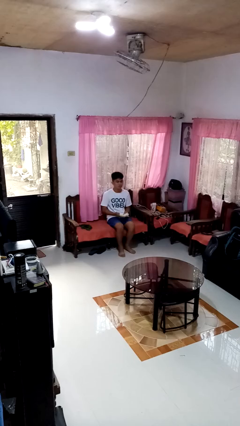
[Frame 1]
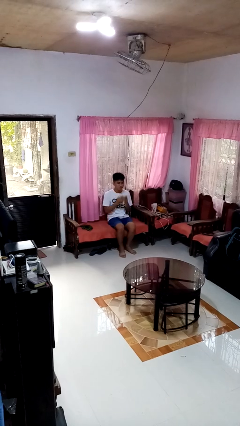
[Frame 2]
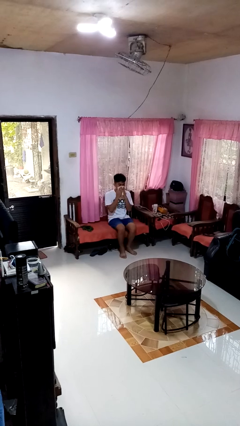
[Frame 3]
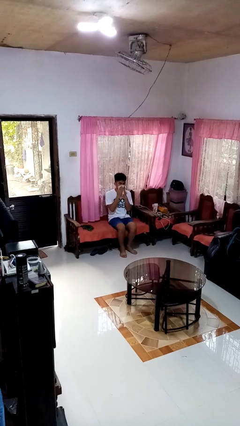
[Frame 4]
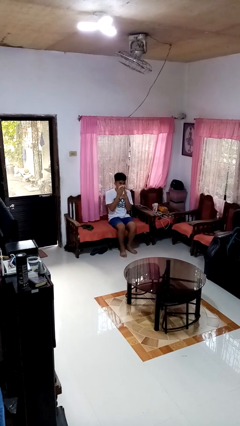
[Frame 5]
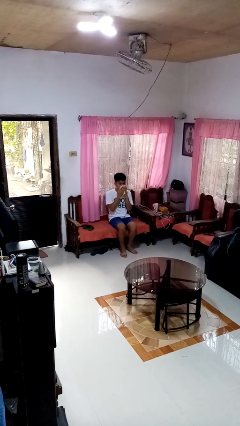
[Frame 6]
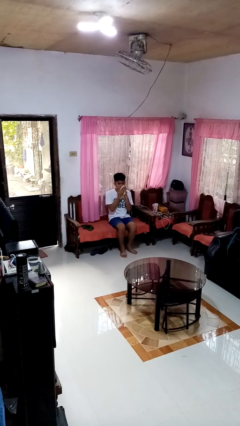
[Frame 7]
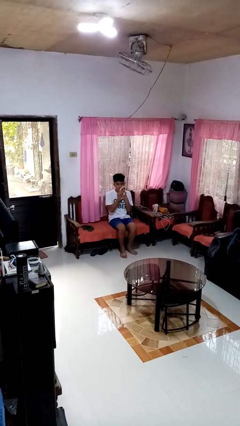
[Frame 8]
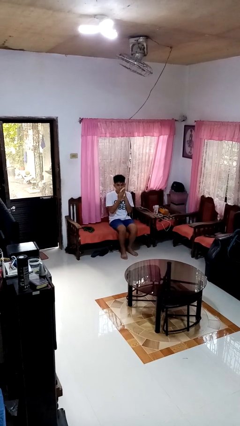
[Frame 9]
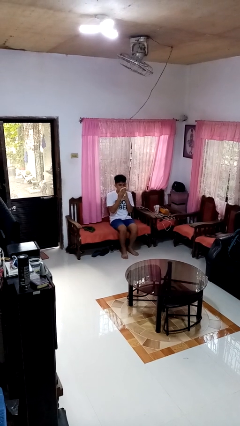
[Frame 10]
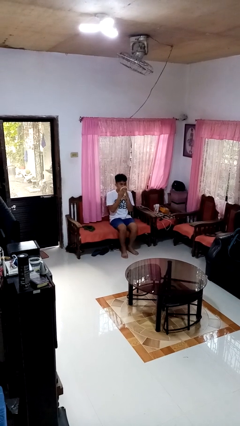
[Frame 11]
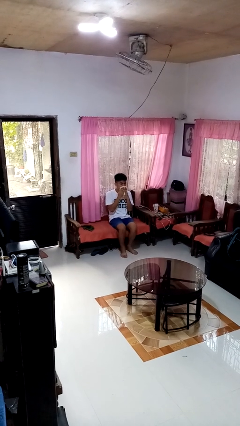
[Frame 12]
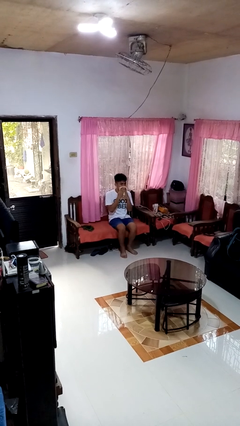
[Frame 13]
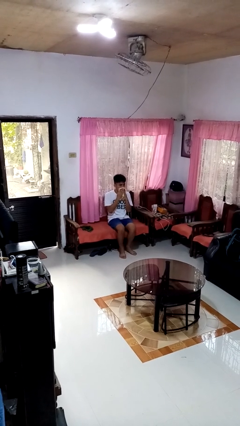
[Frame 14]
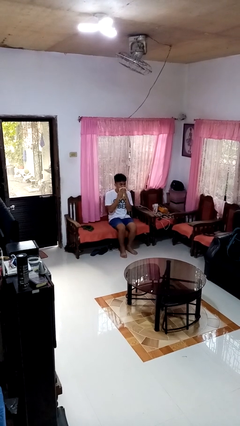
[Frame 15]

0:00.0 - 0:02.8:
person wipes mouth with napkin

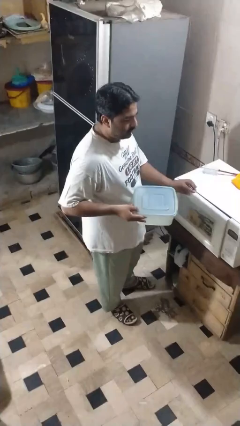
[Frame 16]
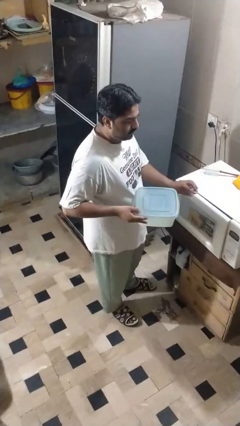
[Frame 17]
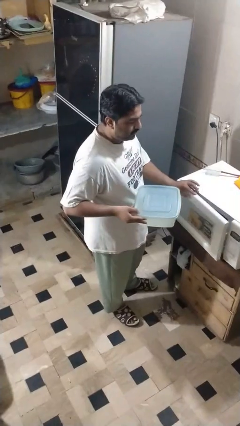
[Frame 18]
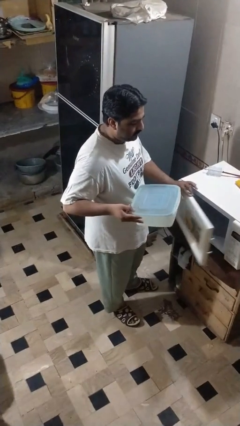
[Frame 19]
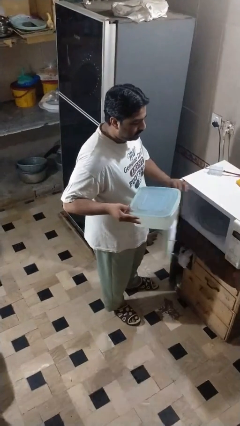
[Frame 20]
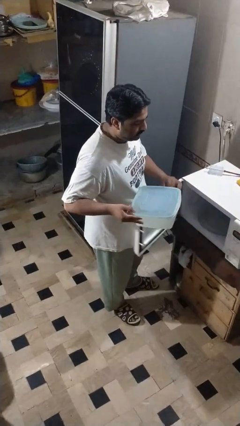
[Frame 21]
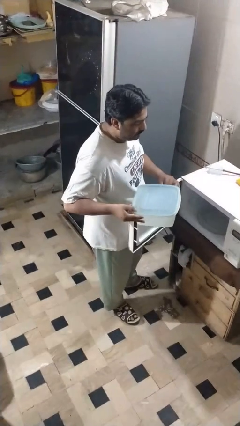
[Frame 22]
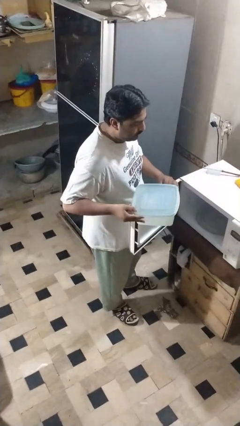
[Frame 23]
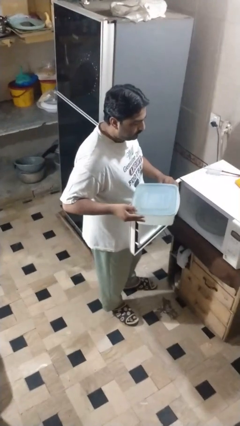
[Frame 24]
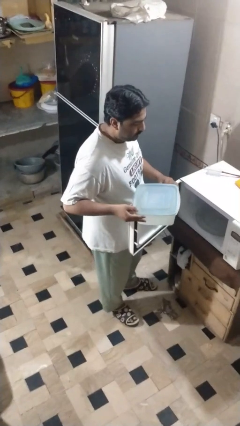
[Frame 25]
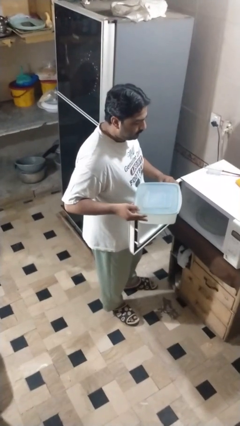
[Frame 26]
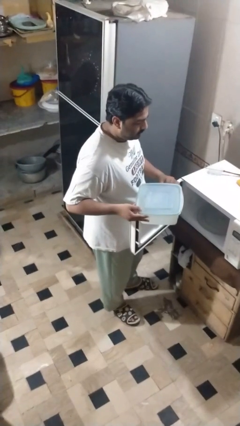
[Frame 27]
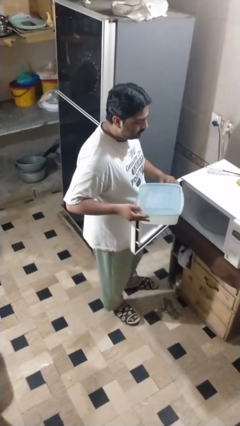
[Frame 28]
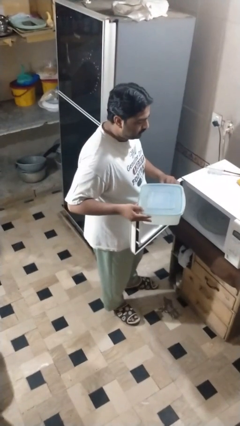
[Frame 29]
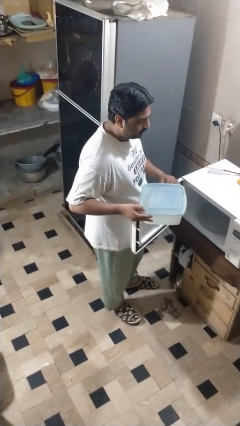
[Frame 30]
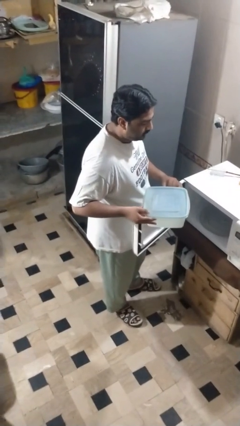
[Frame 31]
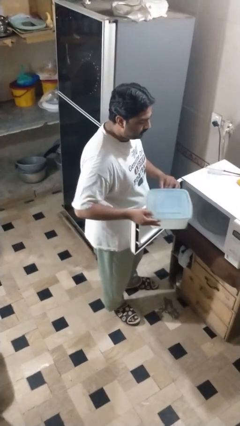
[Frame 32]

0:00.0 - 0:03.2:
person opens microwave

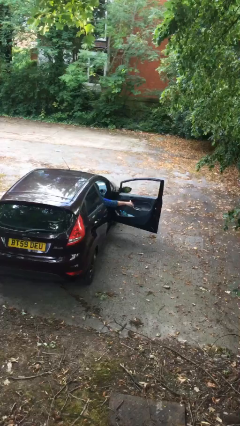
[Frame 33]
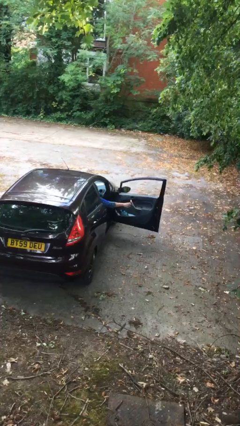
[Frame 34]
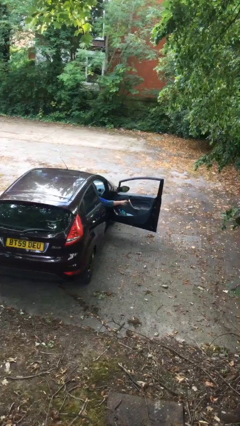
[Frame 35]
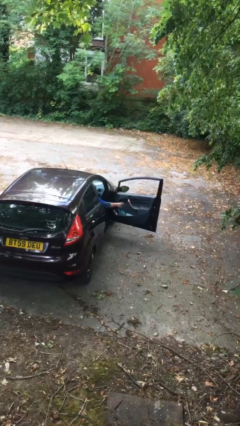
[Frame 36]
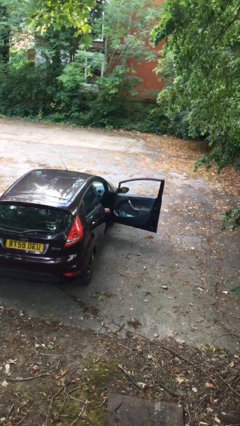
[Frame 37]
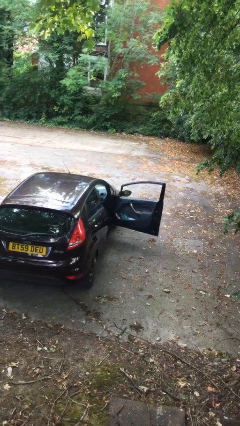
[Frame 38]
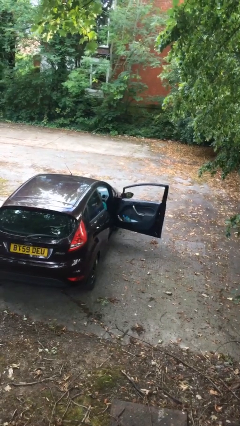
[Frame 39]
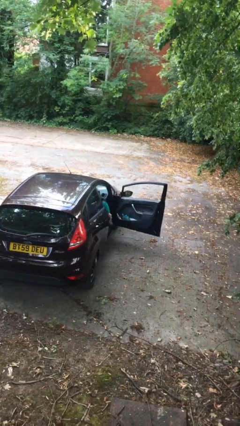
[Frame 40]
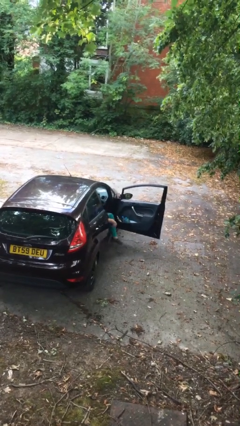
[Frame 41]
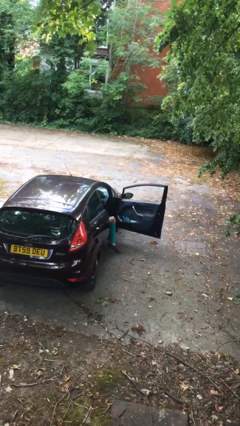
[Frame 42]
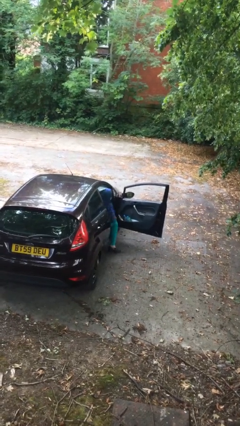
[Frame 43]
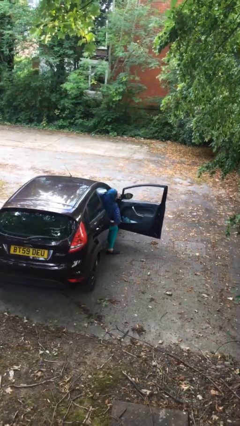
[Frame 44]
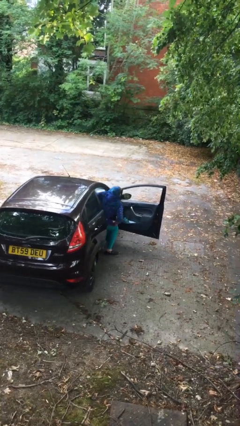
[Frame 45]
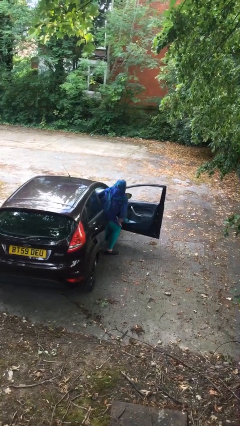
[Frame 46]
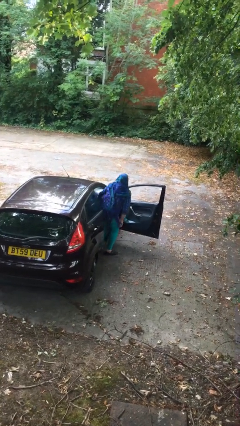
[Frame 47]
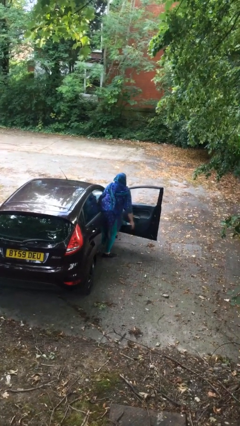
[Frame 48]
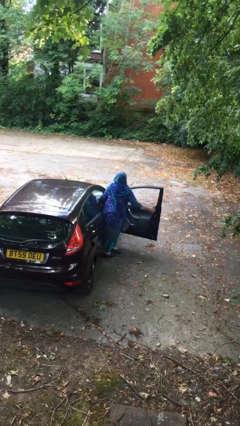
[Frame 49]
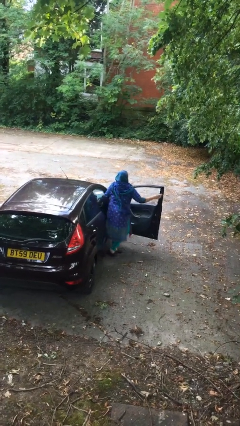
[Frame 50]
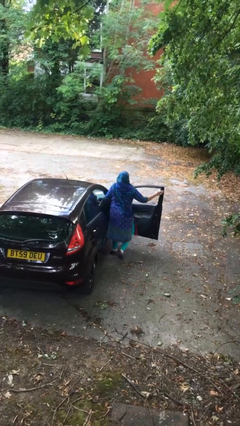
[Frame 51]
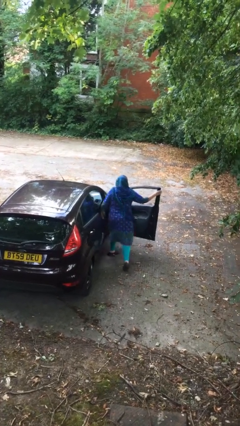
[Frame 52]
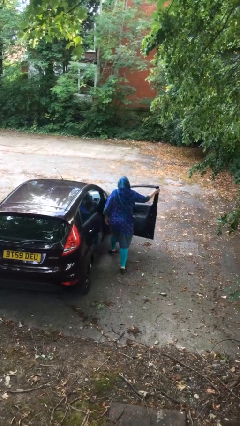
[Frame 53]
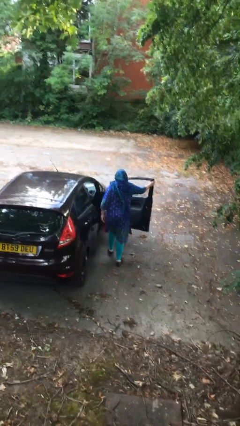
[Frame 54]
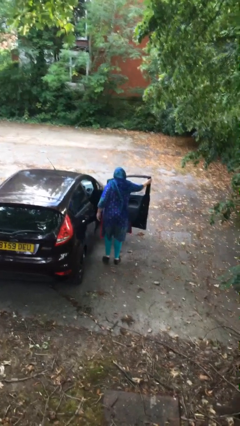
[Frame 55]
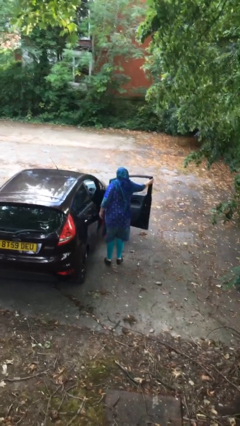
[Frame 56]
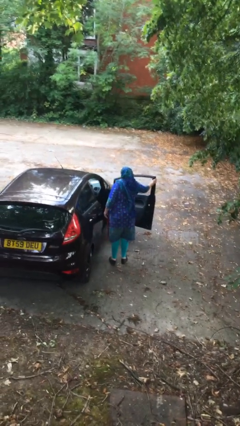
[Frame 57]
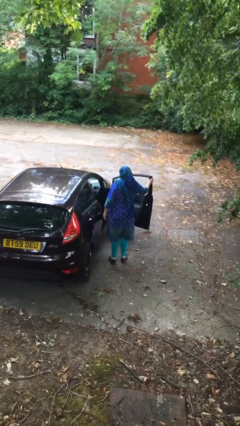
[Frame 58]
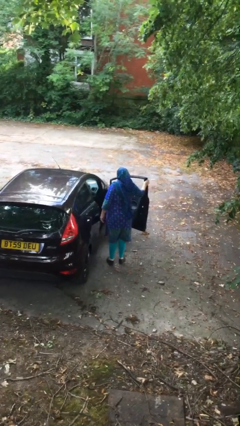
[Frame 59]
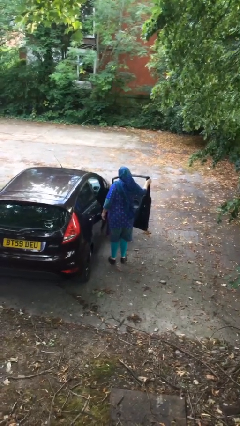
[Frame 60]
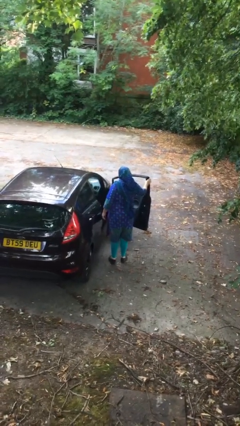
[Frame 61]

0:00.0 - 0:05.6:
person exits car

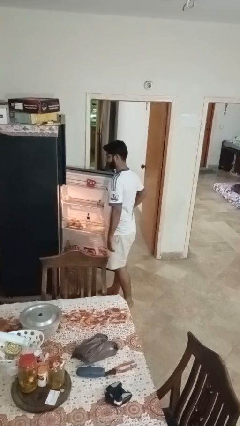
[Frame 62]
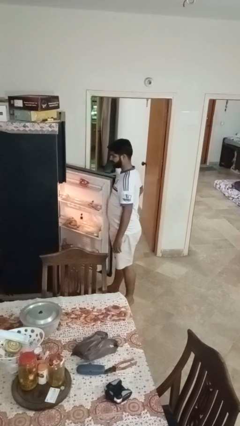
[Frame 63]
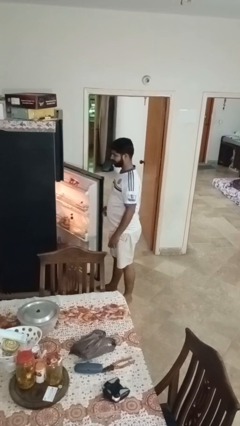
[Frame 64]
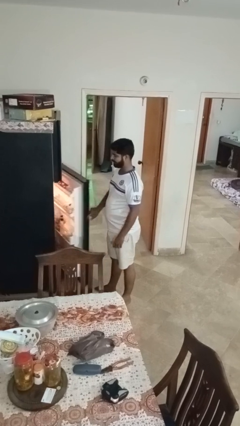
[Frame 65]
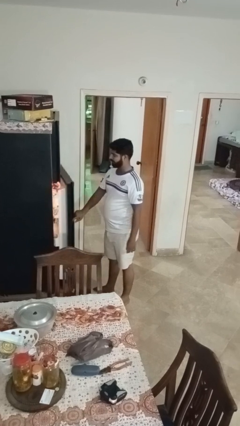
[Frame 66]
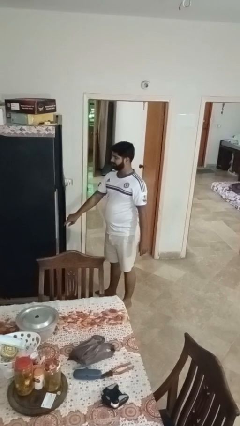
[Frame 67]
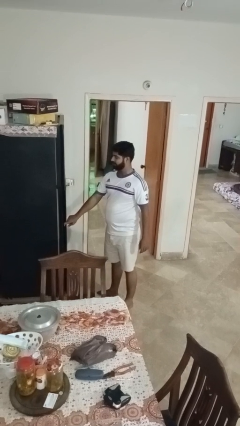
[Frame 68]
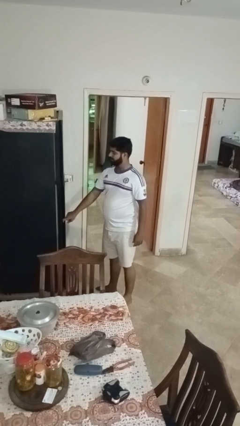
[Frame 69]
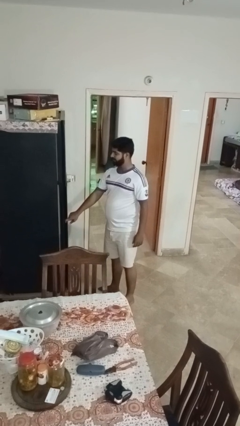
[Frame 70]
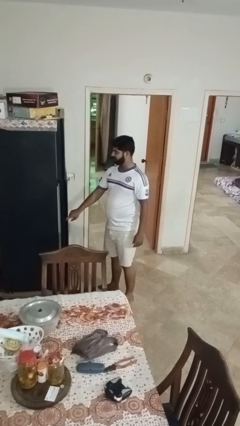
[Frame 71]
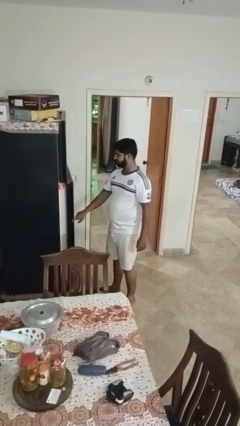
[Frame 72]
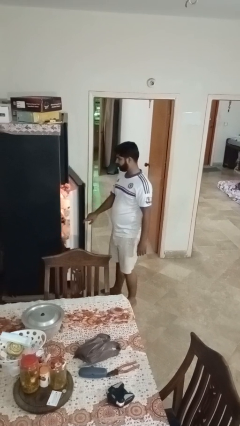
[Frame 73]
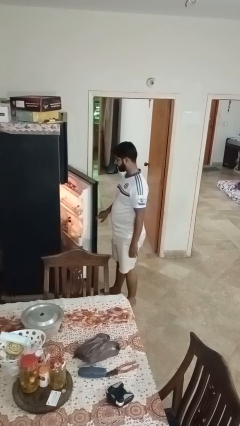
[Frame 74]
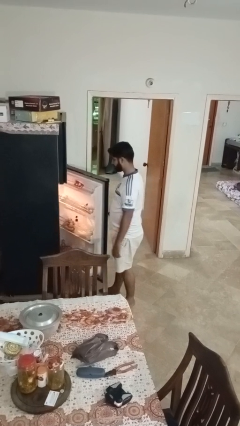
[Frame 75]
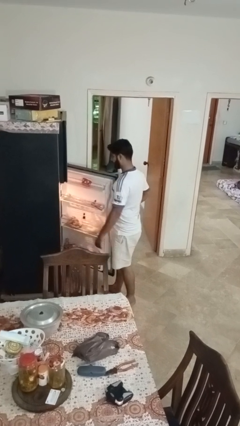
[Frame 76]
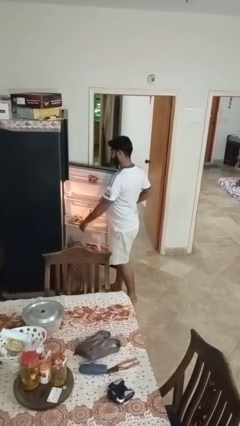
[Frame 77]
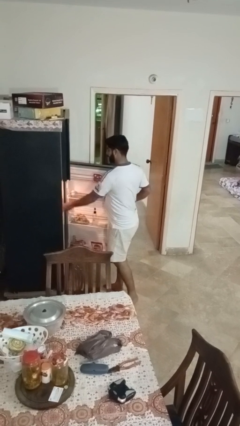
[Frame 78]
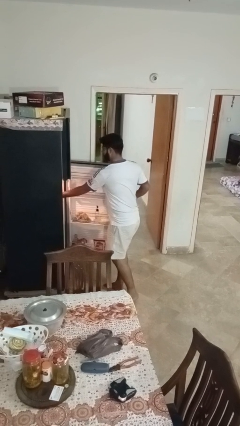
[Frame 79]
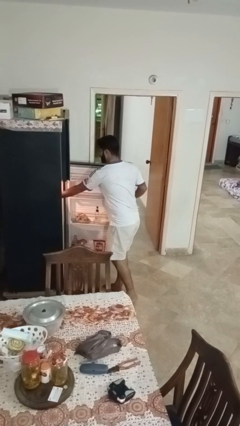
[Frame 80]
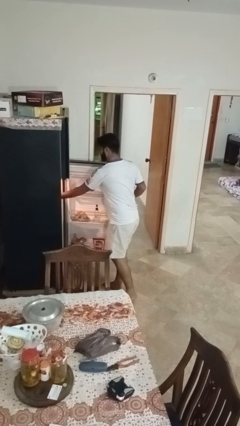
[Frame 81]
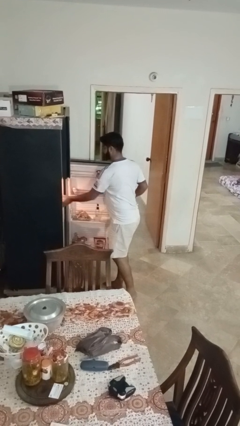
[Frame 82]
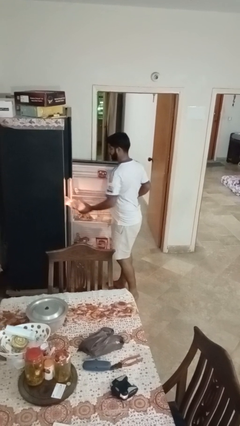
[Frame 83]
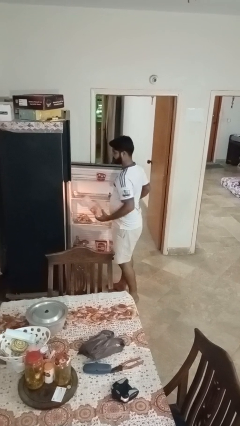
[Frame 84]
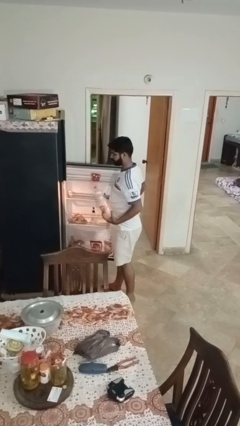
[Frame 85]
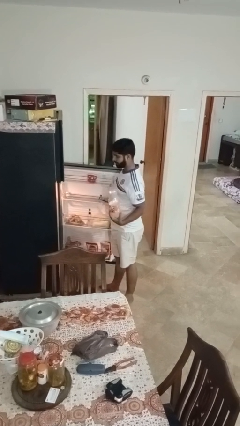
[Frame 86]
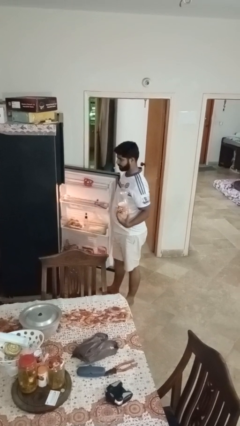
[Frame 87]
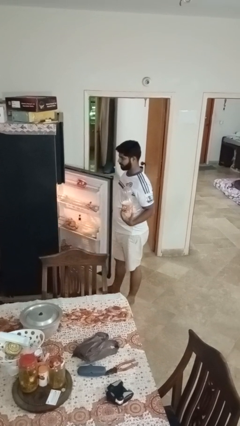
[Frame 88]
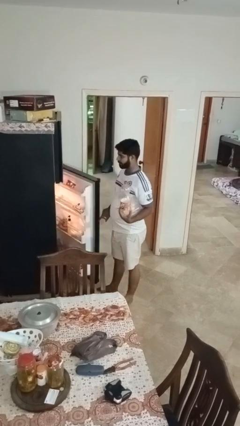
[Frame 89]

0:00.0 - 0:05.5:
person takes object from refrigerator

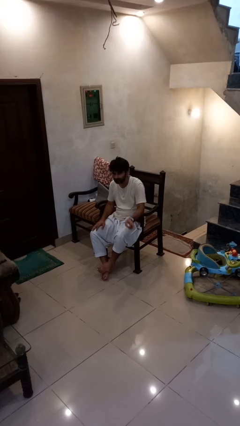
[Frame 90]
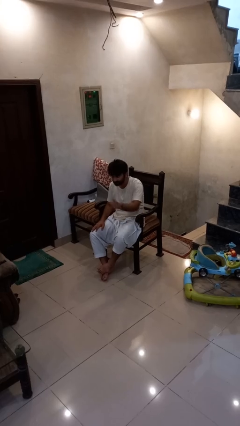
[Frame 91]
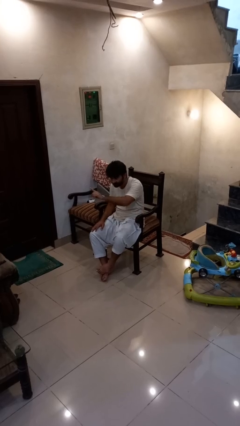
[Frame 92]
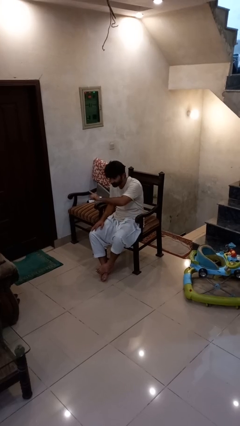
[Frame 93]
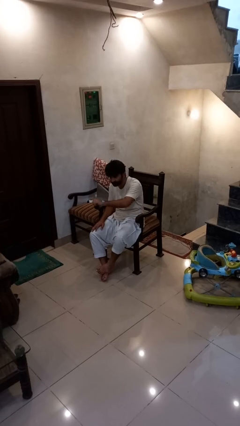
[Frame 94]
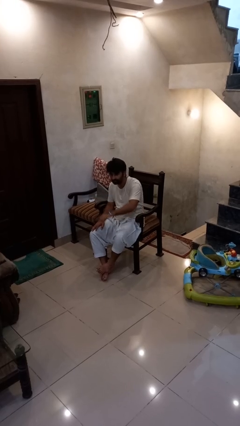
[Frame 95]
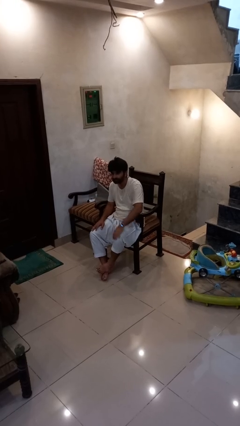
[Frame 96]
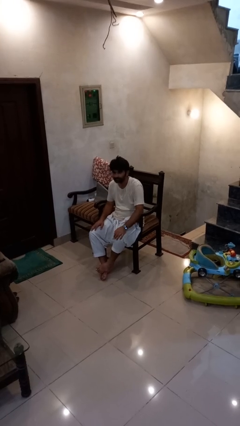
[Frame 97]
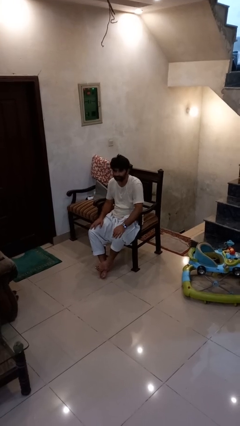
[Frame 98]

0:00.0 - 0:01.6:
person gestures swipe right
